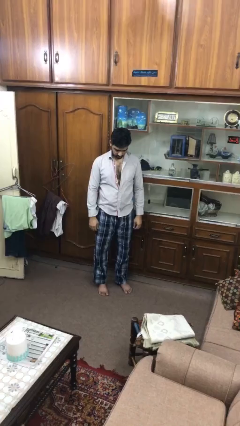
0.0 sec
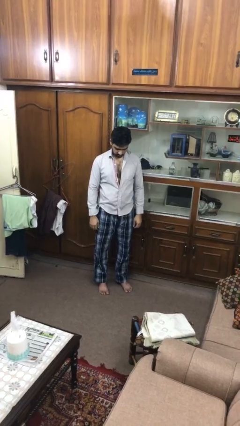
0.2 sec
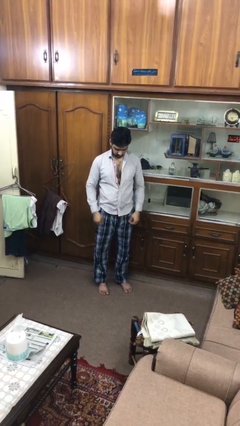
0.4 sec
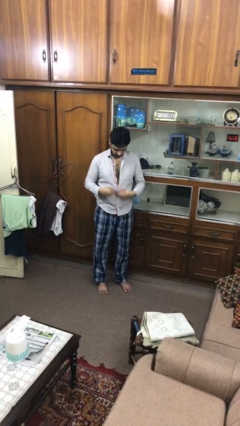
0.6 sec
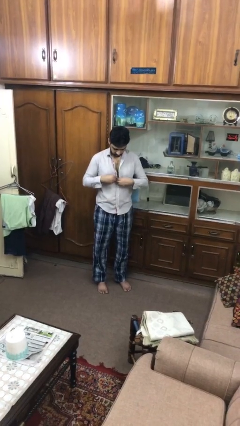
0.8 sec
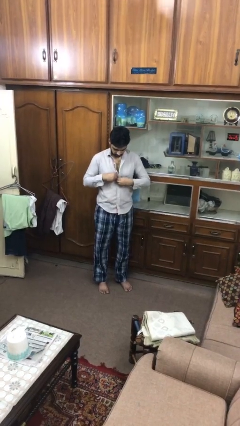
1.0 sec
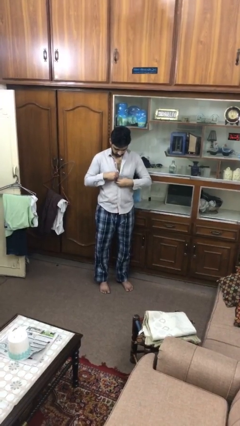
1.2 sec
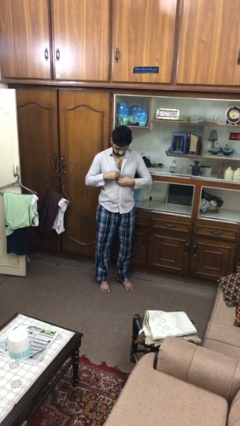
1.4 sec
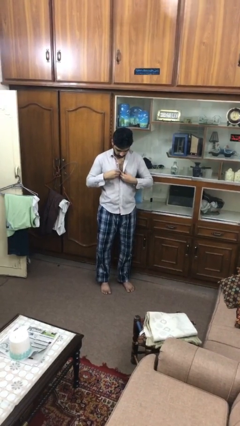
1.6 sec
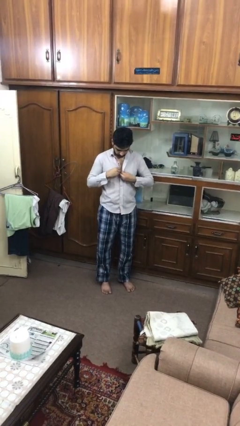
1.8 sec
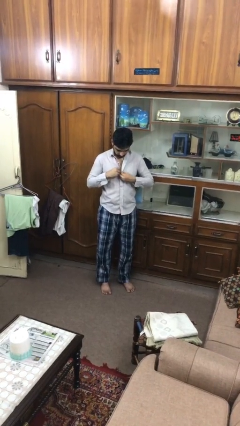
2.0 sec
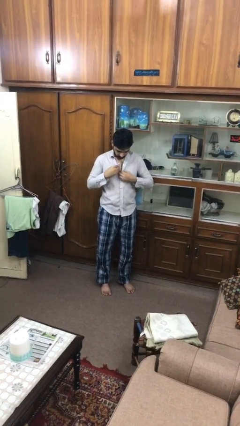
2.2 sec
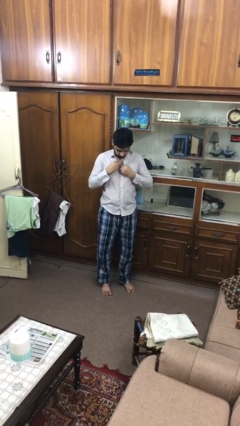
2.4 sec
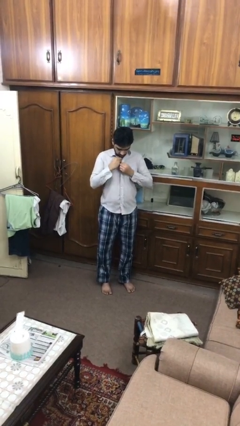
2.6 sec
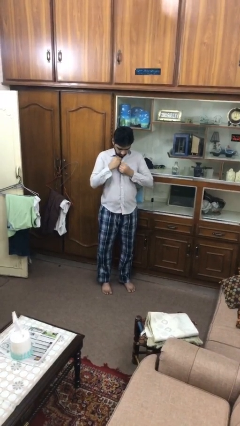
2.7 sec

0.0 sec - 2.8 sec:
person buttons shirt

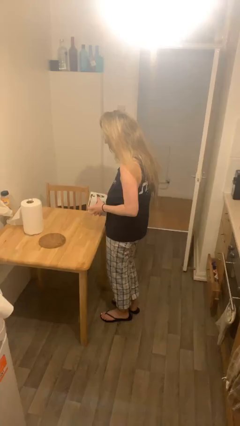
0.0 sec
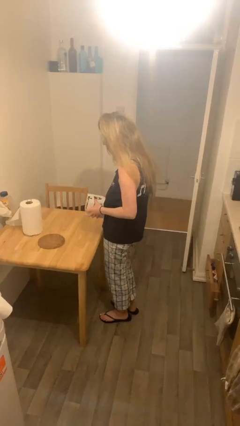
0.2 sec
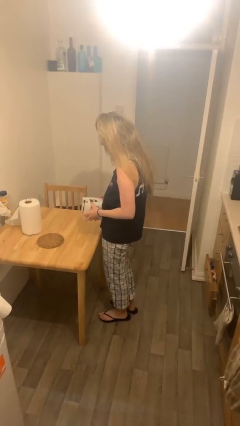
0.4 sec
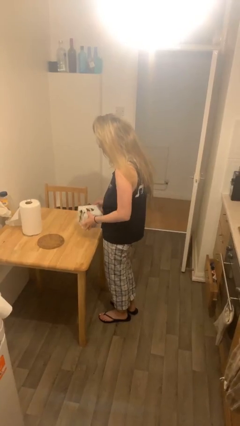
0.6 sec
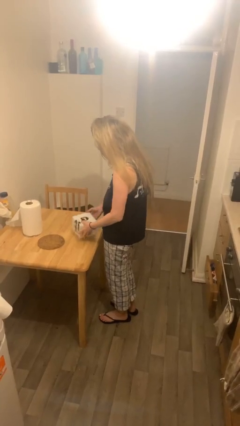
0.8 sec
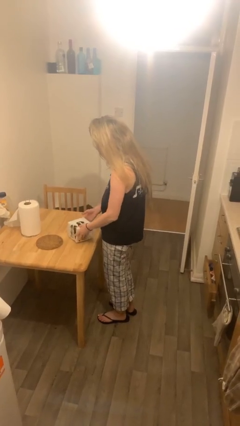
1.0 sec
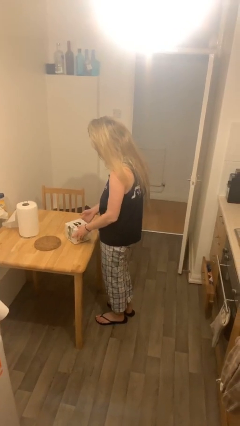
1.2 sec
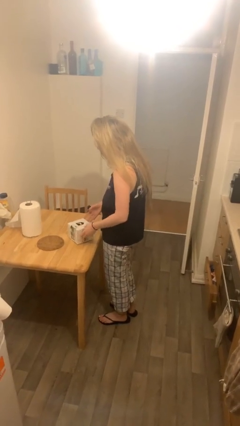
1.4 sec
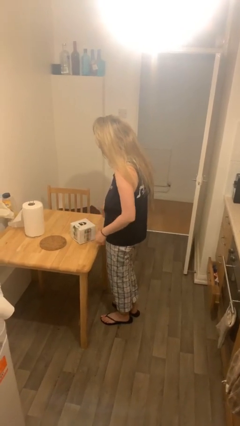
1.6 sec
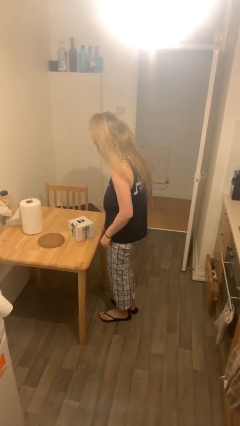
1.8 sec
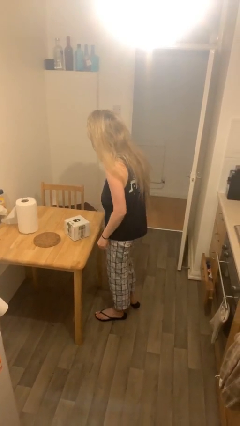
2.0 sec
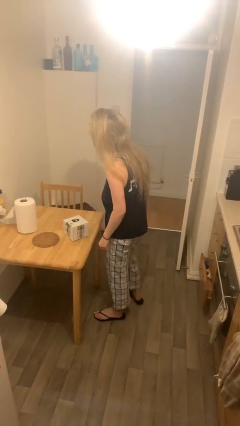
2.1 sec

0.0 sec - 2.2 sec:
person puts down object on table

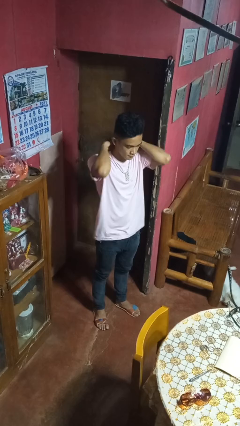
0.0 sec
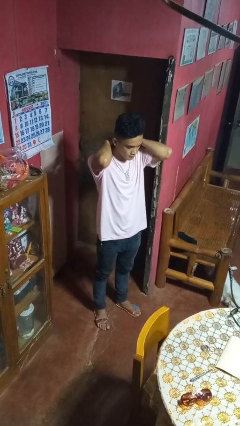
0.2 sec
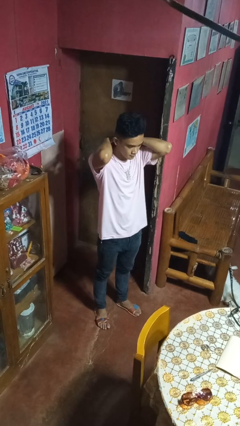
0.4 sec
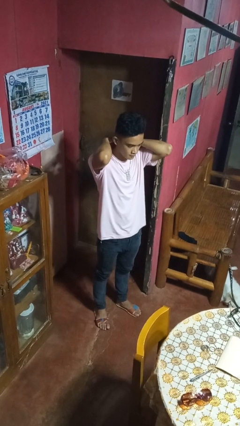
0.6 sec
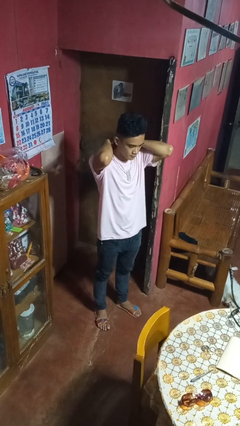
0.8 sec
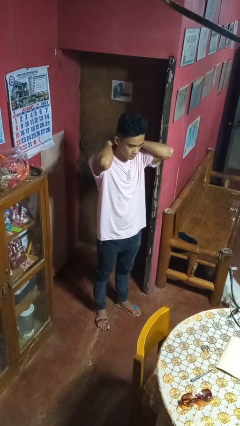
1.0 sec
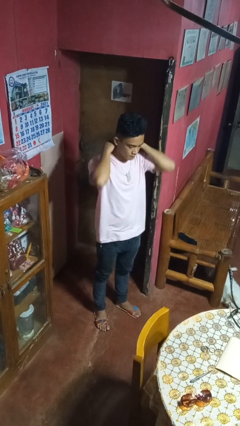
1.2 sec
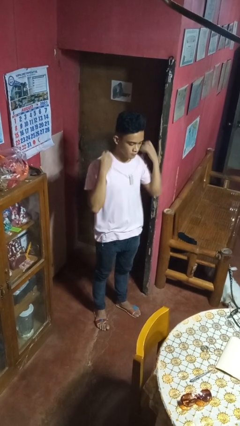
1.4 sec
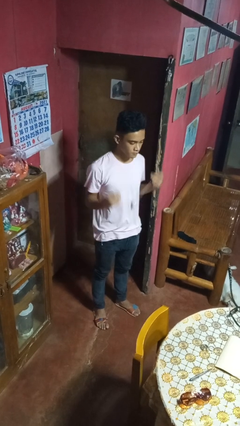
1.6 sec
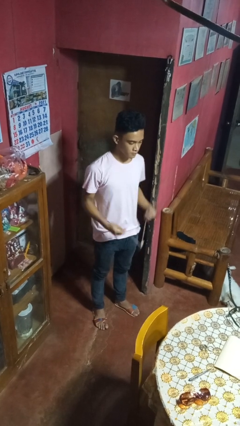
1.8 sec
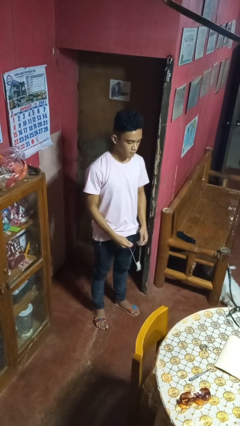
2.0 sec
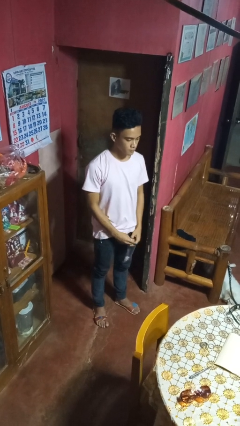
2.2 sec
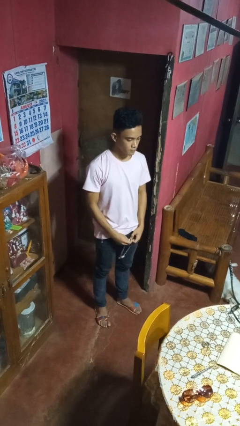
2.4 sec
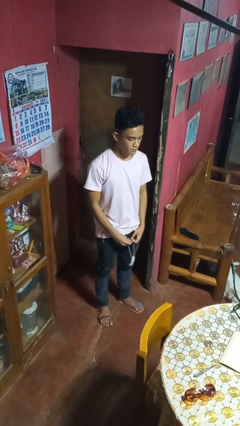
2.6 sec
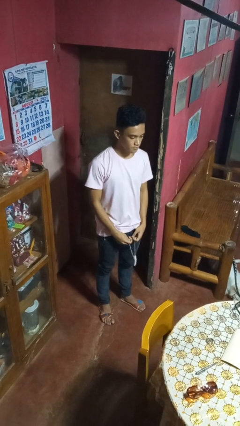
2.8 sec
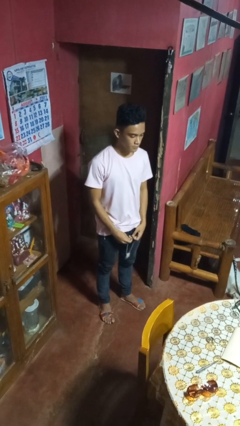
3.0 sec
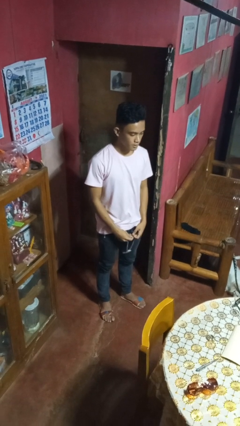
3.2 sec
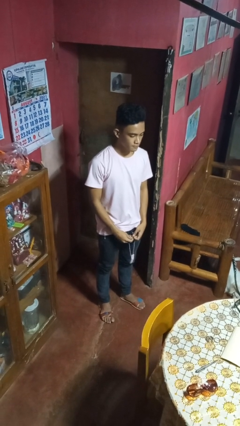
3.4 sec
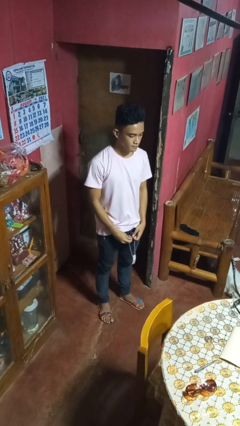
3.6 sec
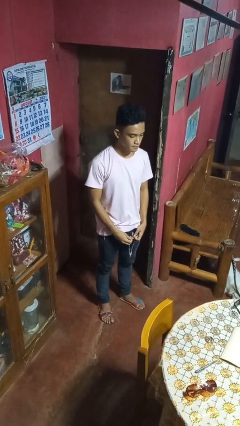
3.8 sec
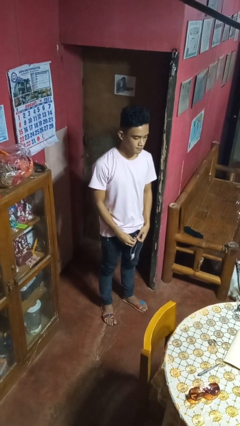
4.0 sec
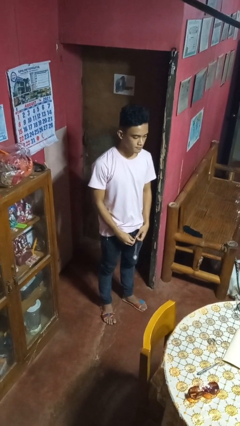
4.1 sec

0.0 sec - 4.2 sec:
person takes off necklace

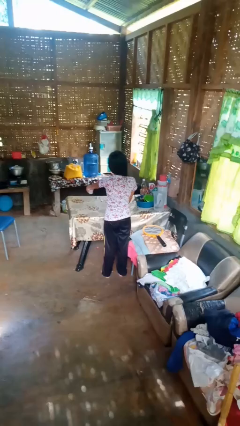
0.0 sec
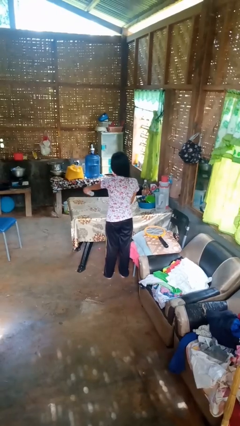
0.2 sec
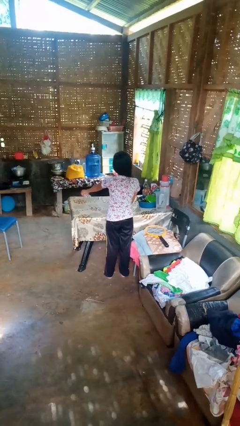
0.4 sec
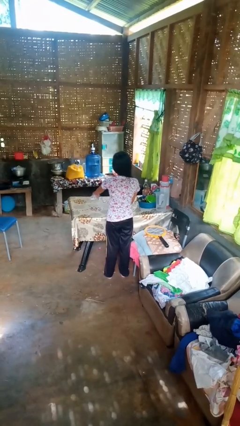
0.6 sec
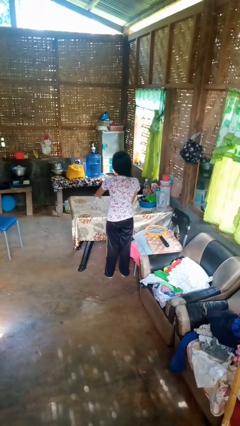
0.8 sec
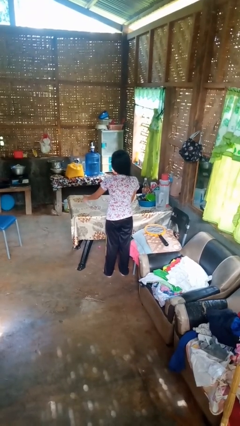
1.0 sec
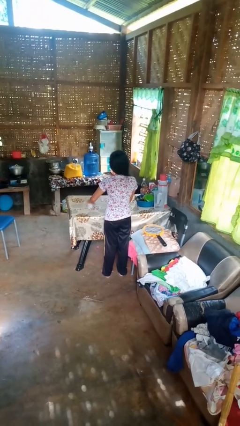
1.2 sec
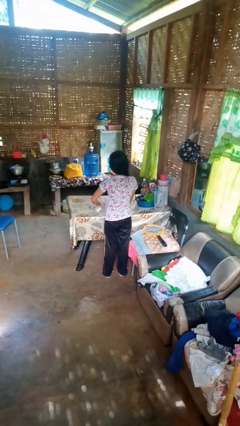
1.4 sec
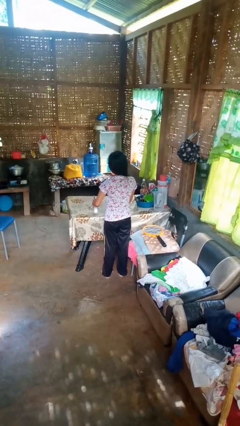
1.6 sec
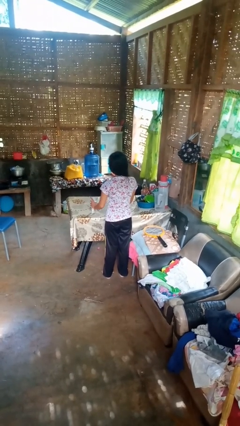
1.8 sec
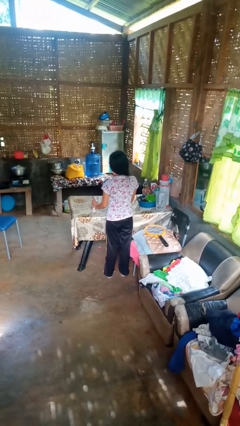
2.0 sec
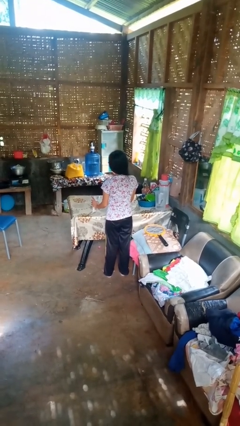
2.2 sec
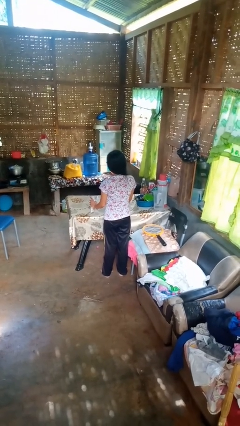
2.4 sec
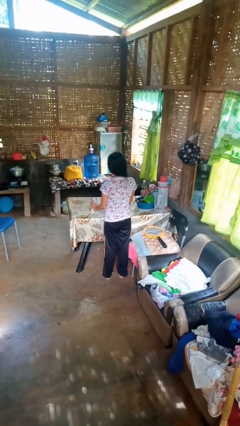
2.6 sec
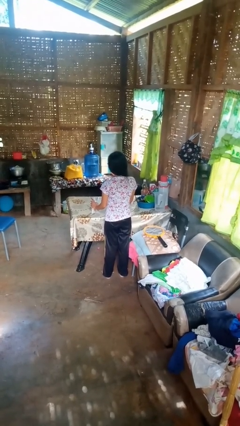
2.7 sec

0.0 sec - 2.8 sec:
person sprays from bottle

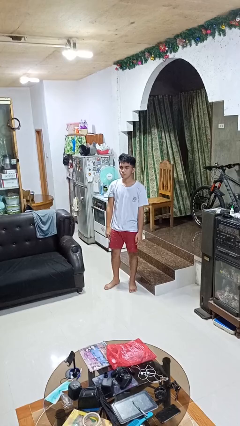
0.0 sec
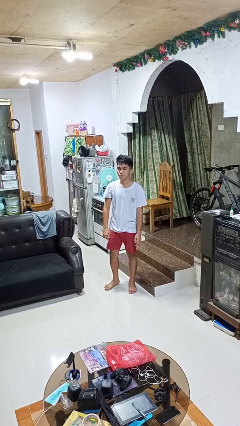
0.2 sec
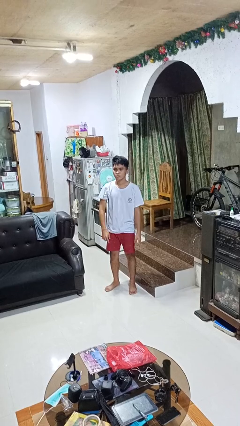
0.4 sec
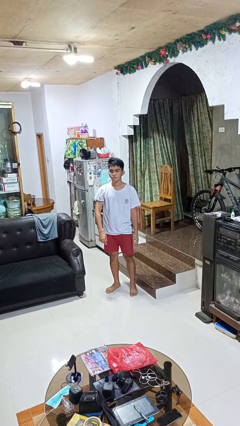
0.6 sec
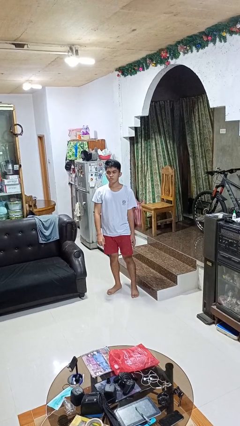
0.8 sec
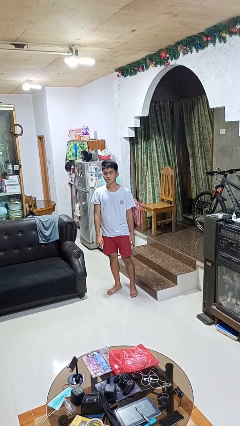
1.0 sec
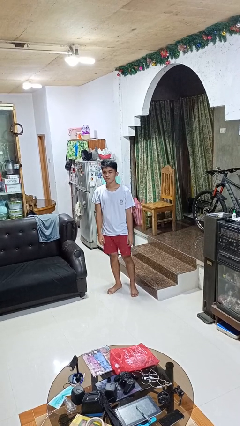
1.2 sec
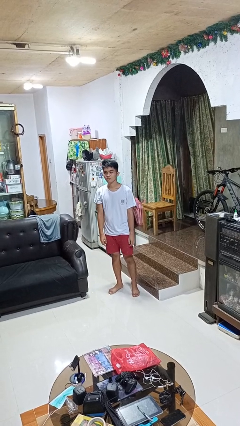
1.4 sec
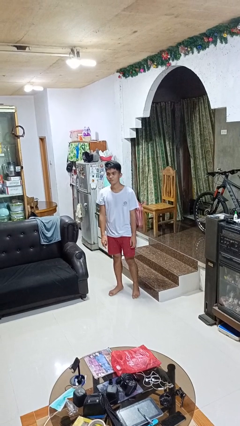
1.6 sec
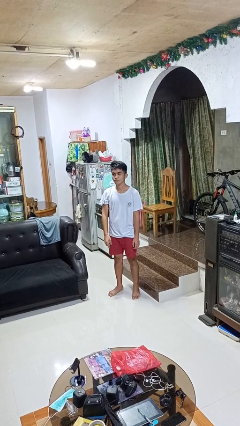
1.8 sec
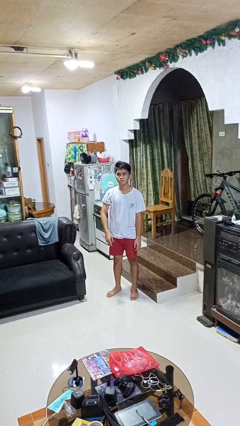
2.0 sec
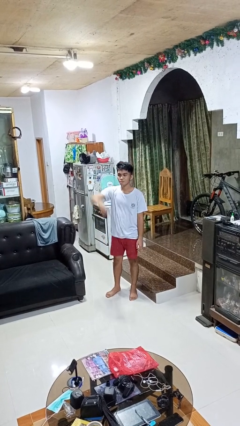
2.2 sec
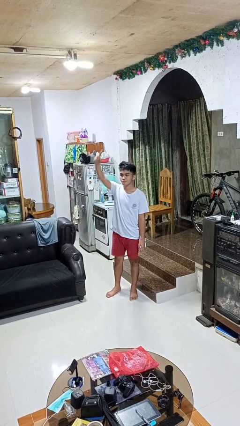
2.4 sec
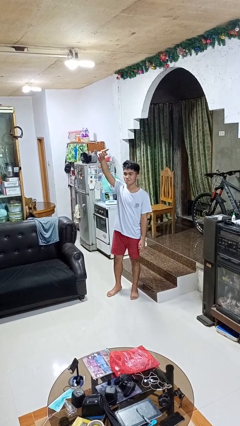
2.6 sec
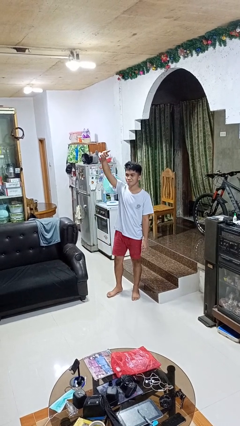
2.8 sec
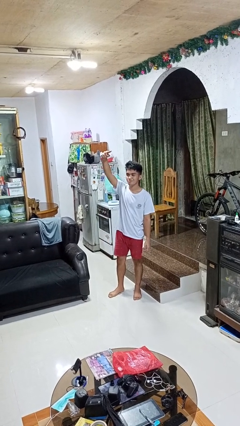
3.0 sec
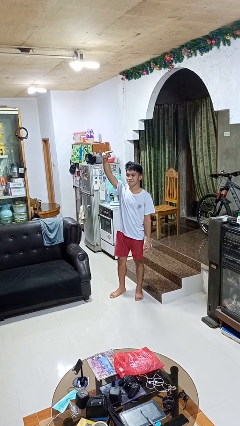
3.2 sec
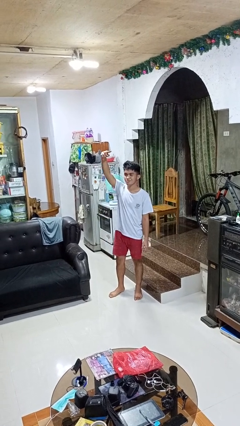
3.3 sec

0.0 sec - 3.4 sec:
person gestures swipe up

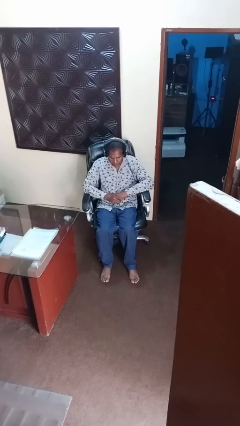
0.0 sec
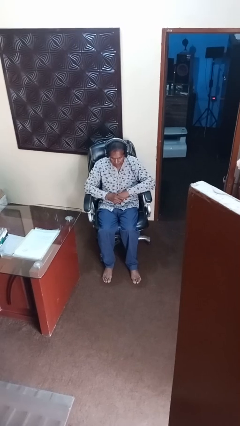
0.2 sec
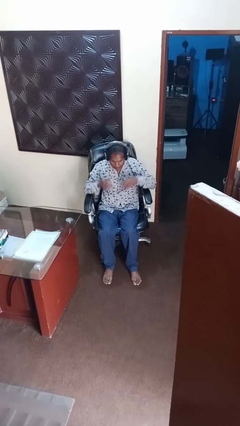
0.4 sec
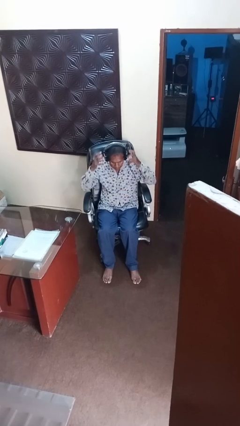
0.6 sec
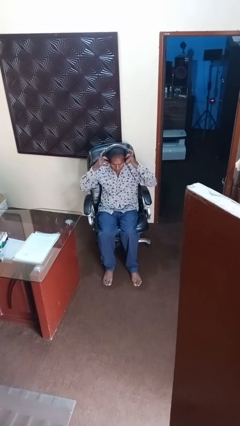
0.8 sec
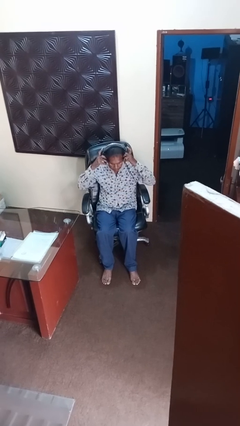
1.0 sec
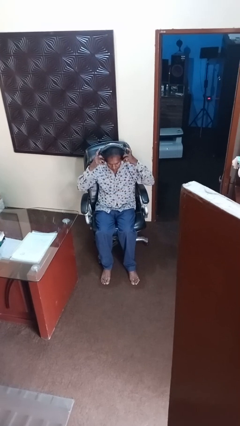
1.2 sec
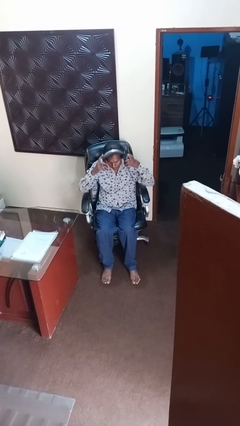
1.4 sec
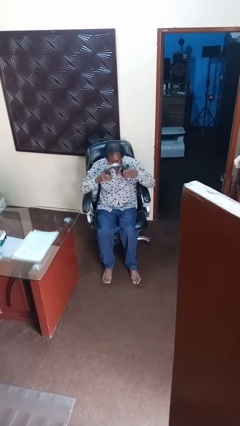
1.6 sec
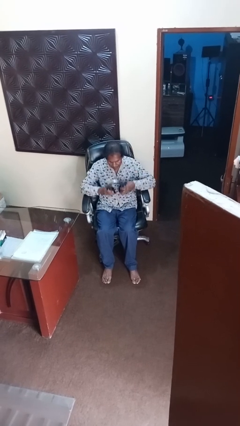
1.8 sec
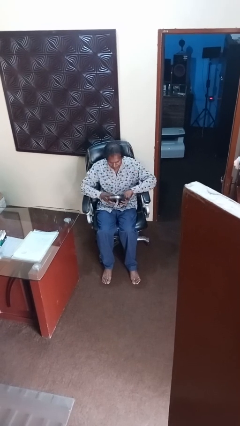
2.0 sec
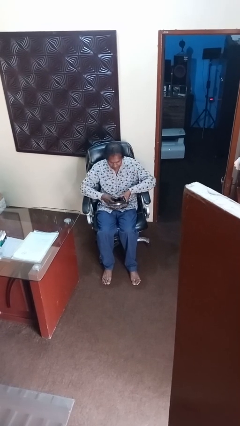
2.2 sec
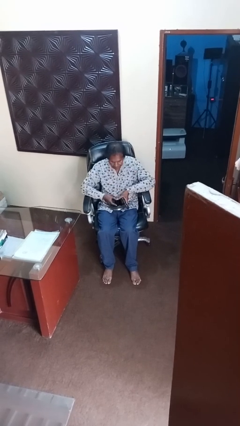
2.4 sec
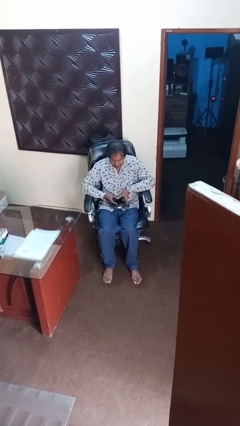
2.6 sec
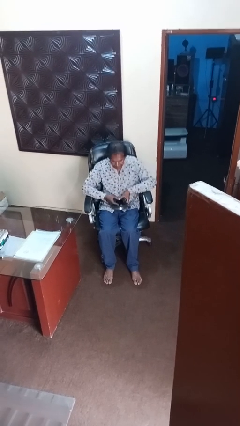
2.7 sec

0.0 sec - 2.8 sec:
person takes off headphones
